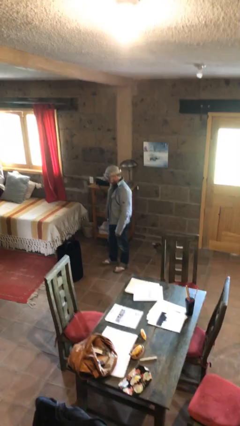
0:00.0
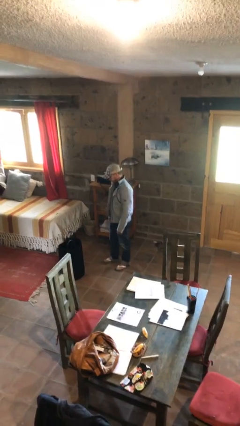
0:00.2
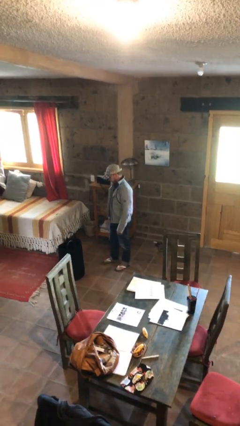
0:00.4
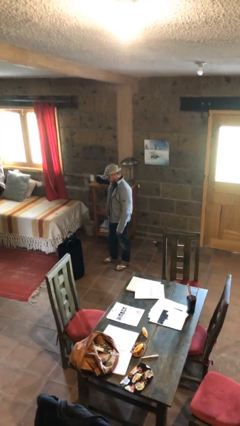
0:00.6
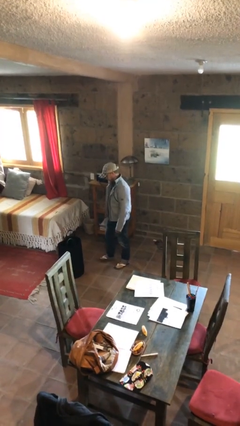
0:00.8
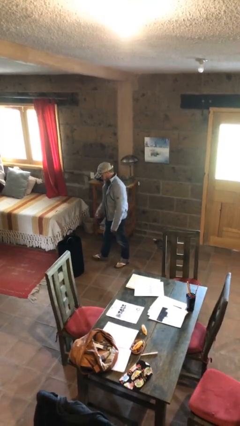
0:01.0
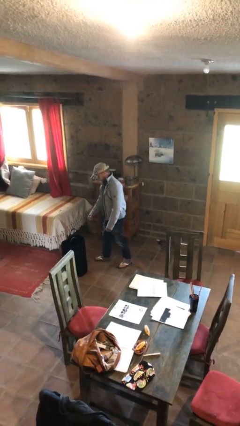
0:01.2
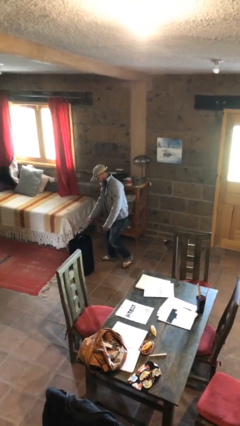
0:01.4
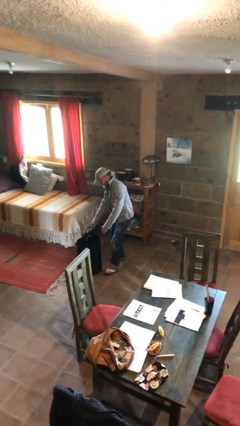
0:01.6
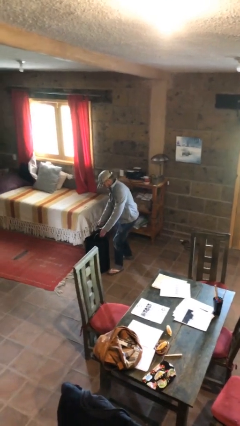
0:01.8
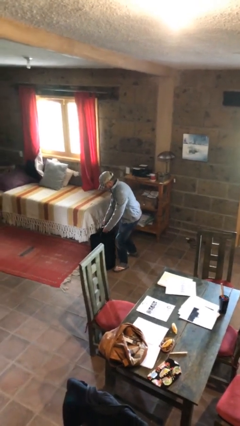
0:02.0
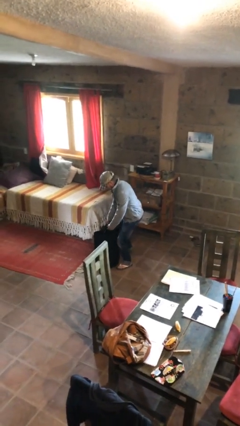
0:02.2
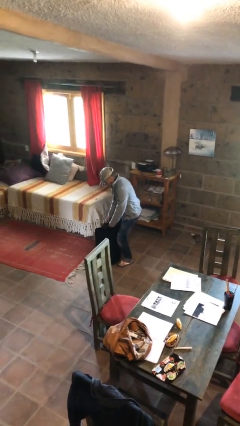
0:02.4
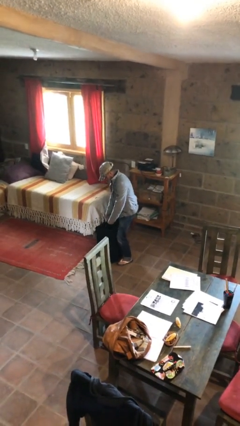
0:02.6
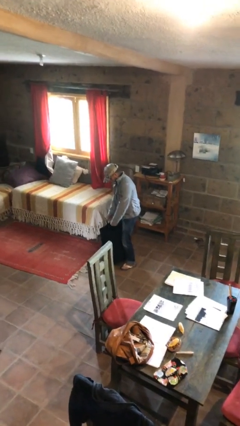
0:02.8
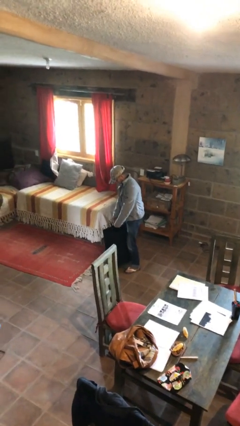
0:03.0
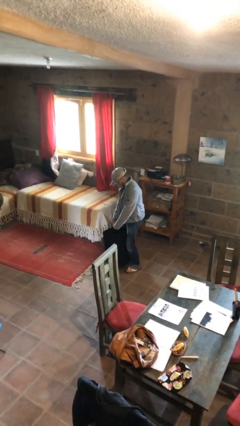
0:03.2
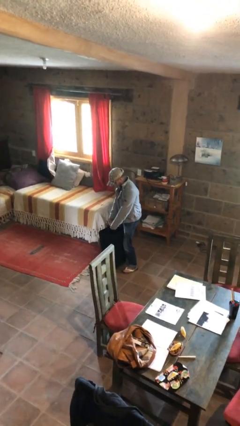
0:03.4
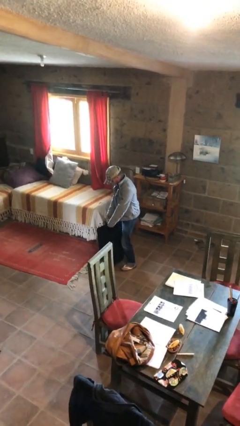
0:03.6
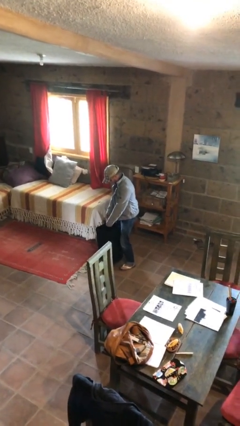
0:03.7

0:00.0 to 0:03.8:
person picks up object from floor

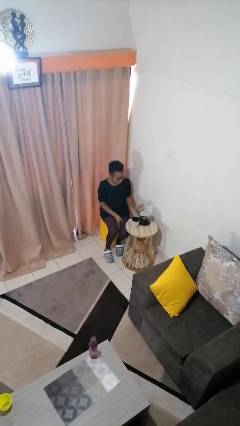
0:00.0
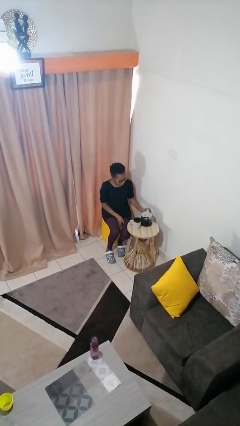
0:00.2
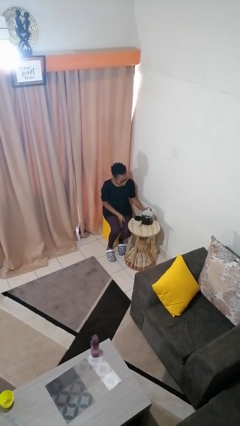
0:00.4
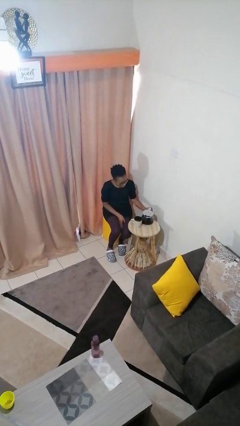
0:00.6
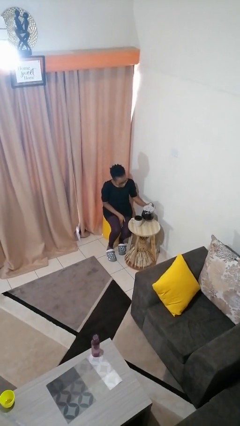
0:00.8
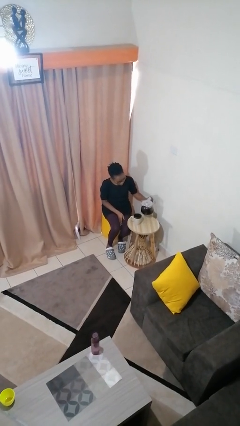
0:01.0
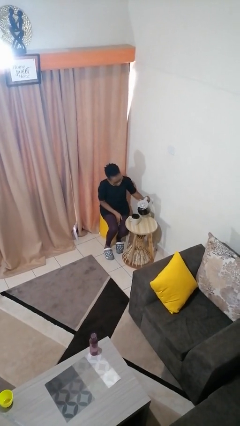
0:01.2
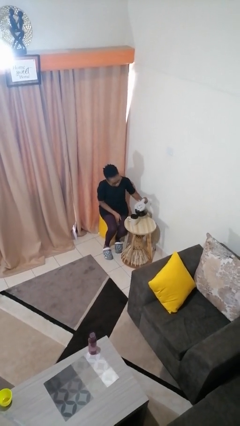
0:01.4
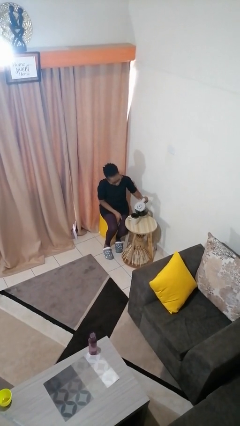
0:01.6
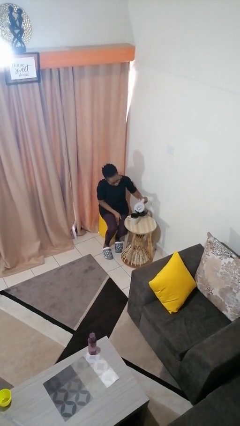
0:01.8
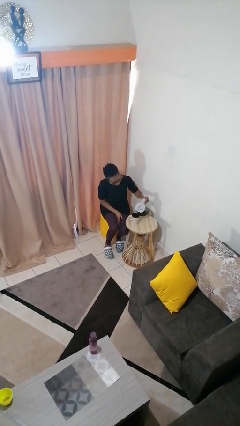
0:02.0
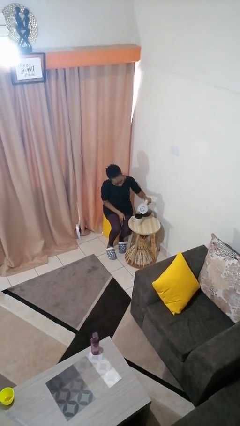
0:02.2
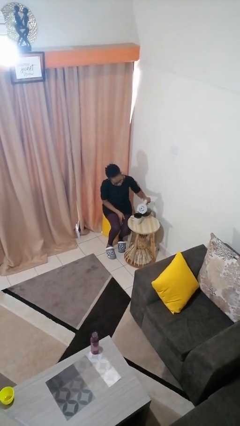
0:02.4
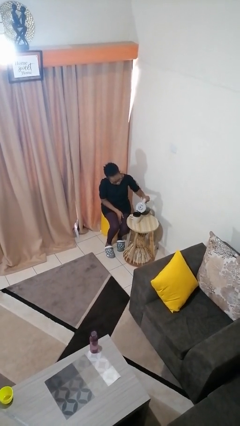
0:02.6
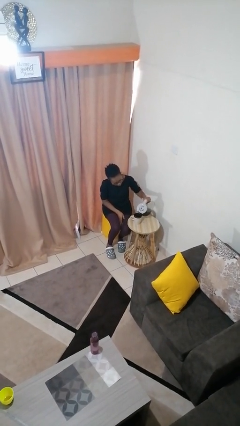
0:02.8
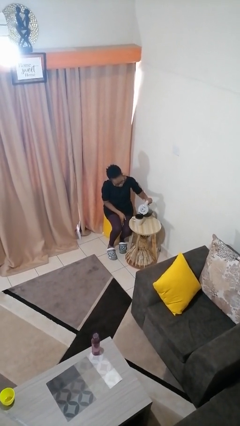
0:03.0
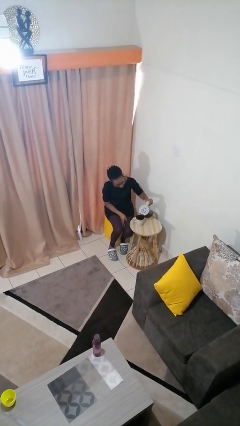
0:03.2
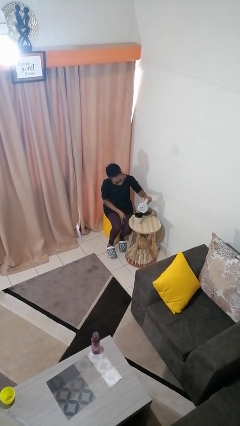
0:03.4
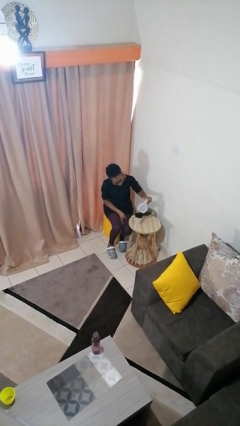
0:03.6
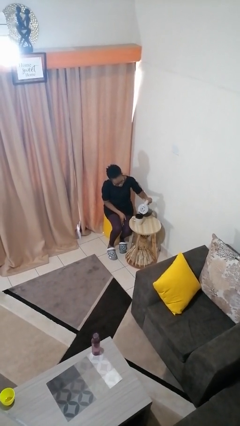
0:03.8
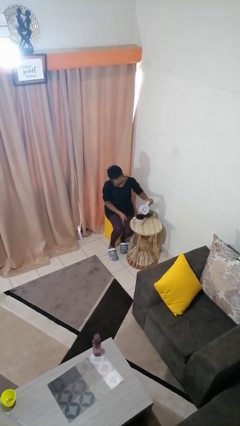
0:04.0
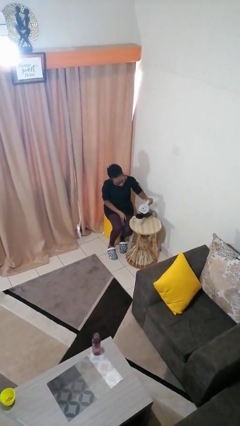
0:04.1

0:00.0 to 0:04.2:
person pours coffee into mug

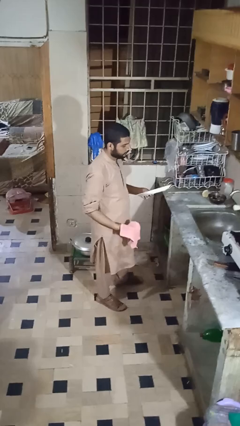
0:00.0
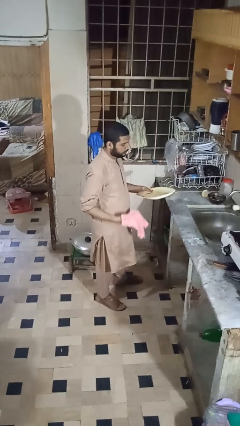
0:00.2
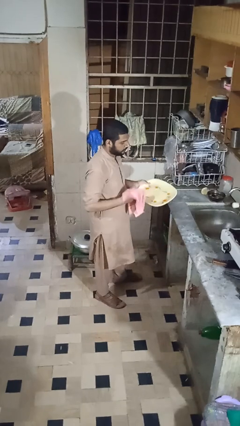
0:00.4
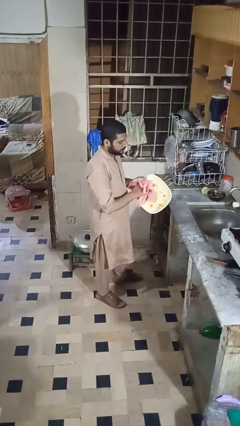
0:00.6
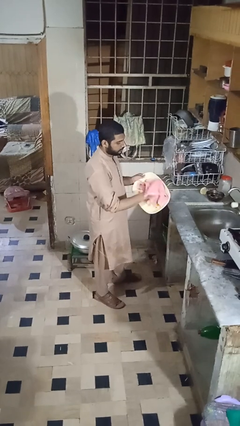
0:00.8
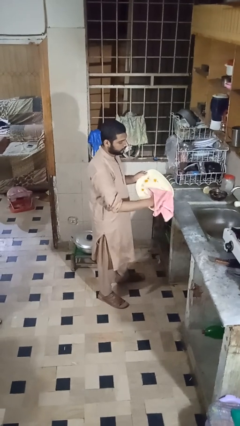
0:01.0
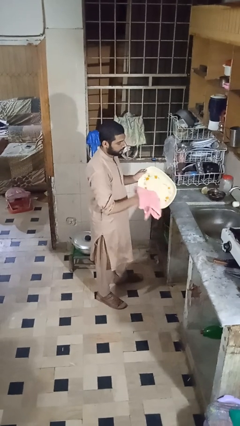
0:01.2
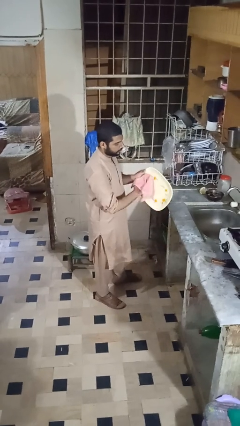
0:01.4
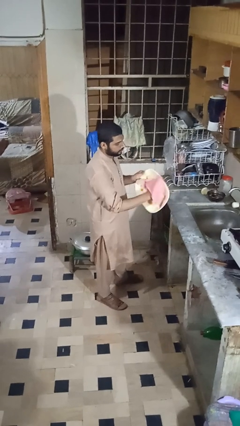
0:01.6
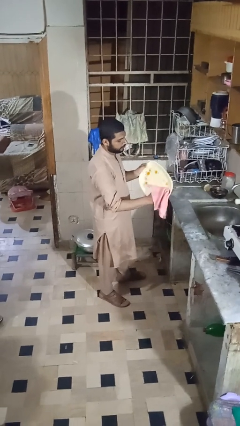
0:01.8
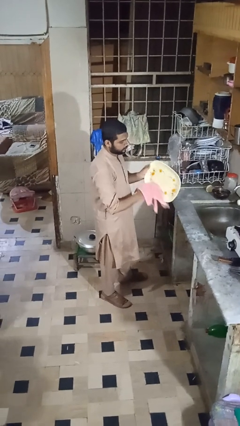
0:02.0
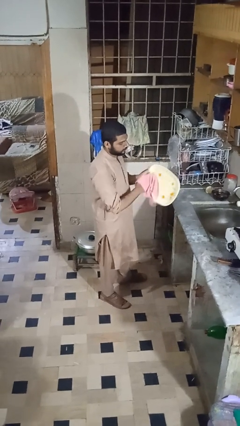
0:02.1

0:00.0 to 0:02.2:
person dries dish

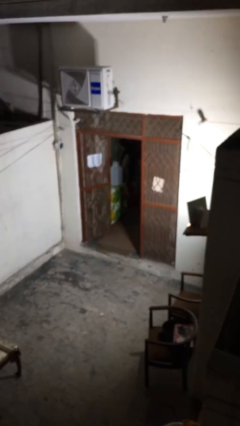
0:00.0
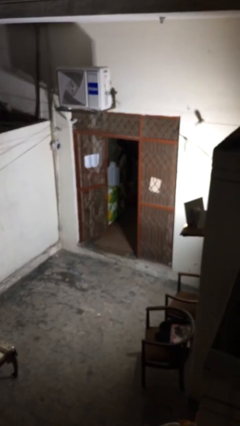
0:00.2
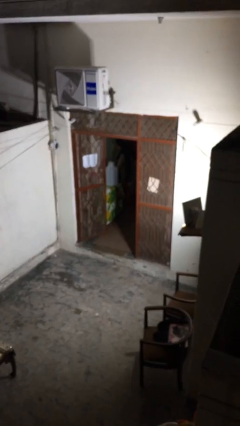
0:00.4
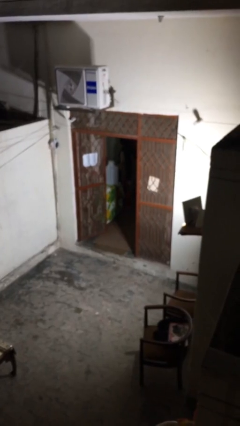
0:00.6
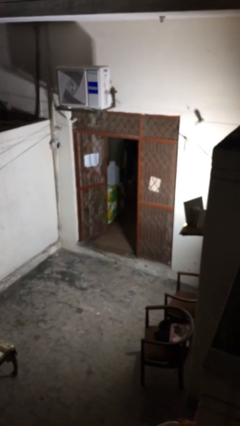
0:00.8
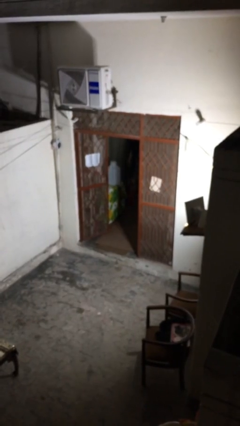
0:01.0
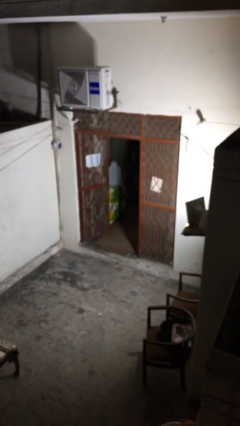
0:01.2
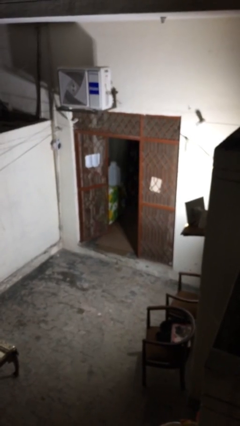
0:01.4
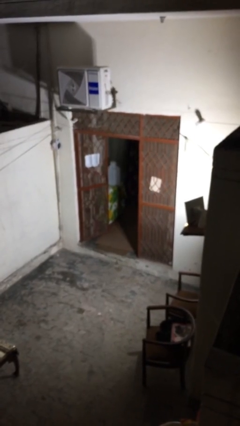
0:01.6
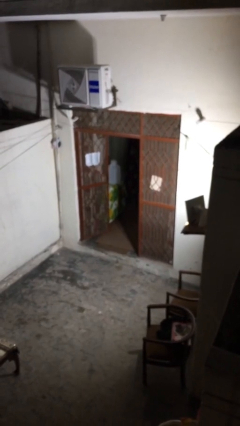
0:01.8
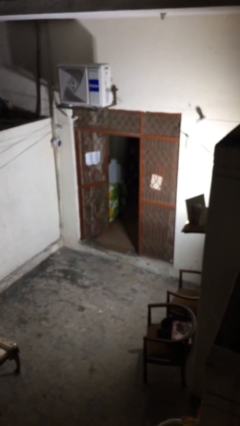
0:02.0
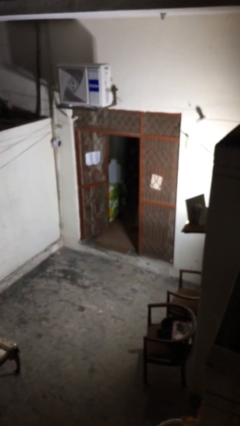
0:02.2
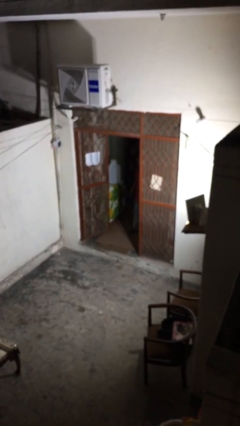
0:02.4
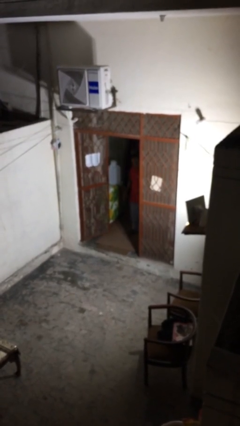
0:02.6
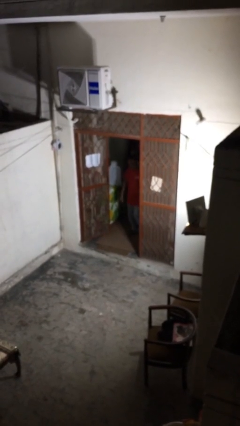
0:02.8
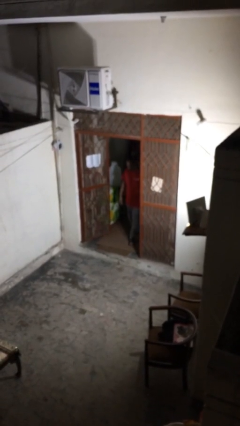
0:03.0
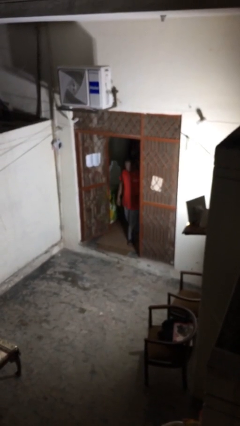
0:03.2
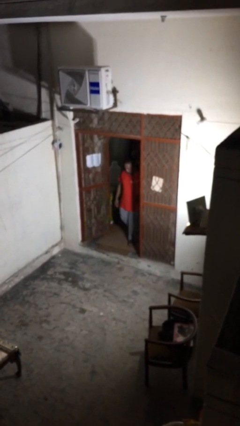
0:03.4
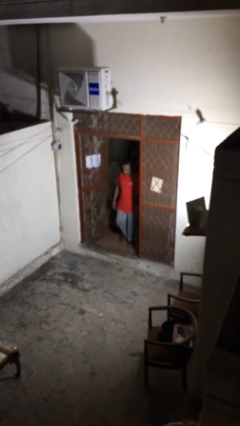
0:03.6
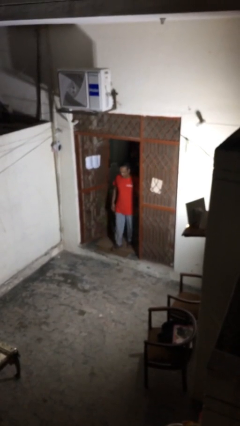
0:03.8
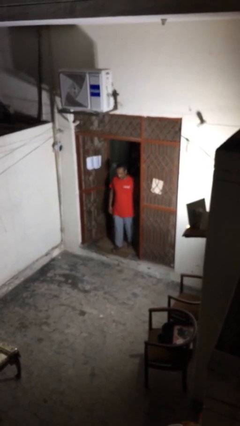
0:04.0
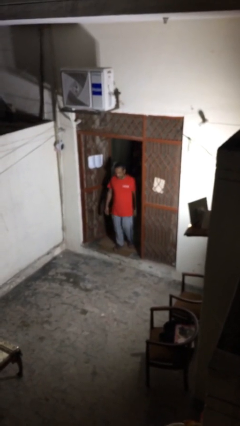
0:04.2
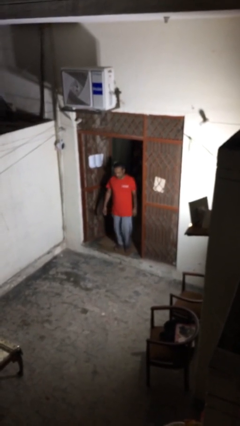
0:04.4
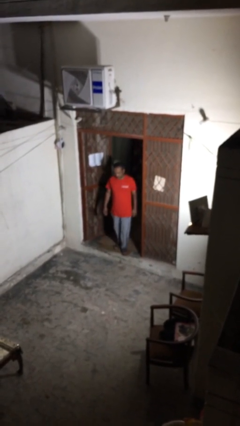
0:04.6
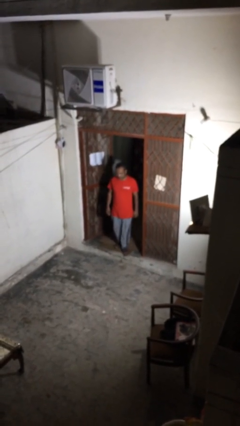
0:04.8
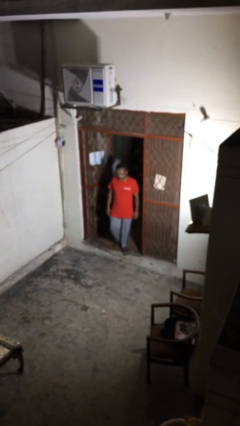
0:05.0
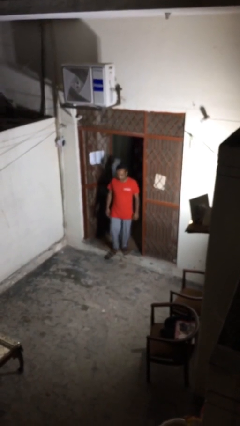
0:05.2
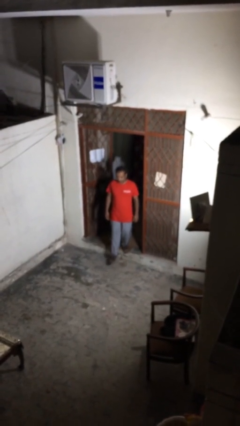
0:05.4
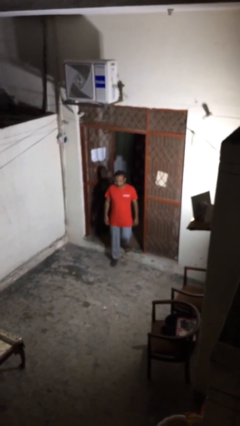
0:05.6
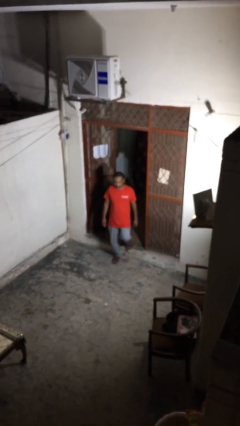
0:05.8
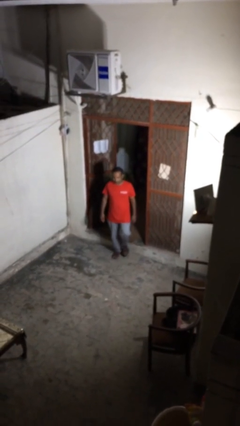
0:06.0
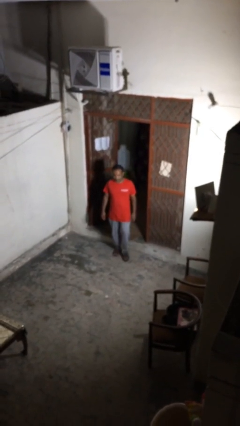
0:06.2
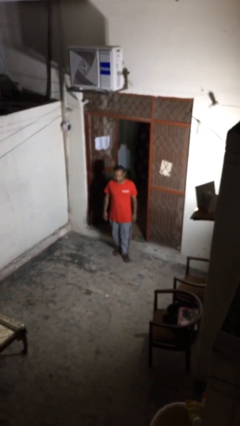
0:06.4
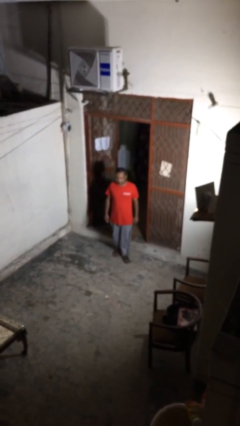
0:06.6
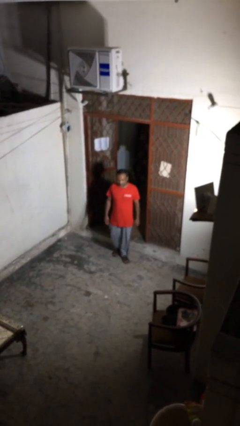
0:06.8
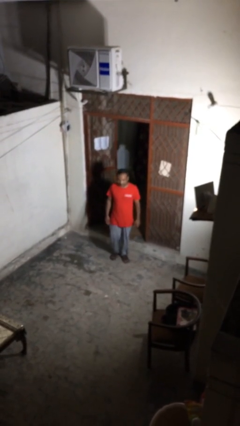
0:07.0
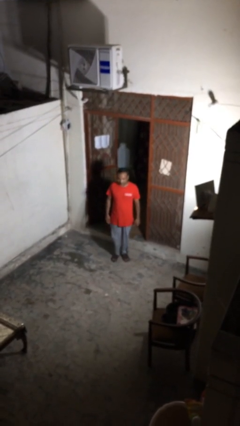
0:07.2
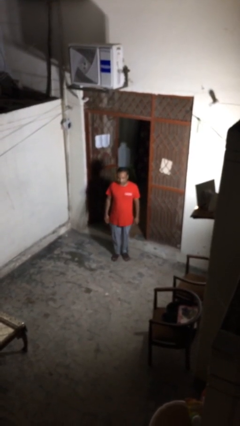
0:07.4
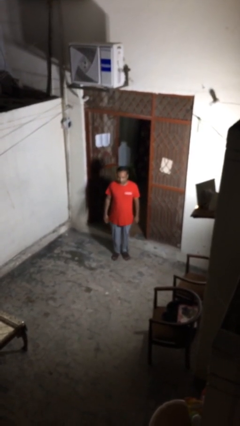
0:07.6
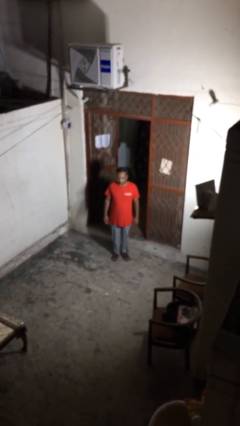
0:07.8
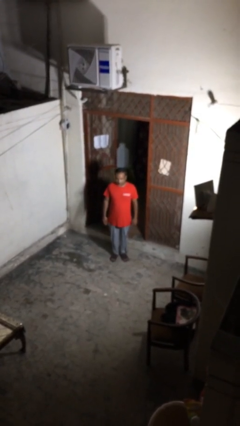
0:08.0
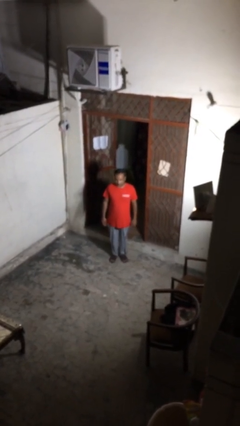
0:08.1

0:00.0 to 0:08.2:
person enters scene through structure
